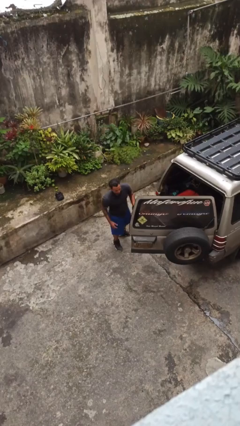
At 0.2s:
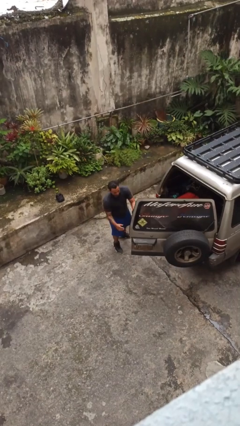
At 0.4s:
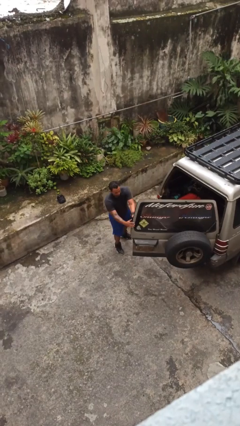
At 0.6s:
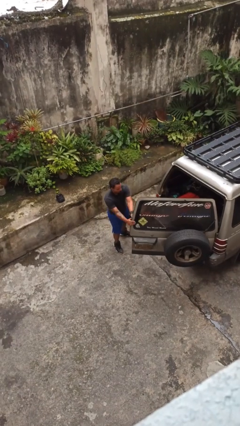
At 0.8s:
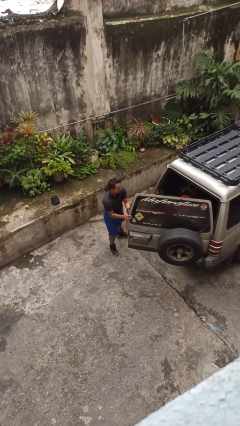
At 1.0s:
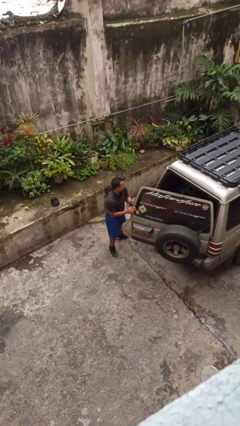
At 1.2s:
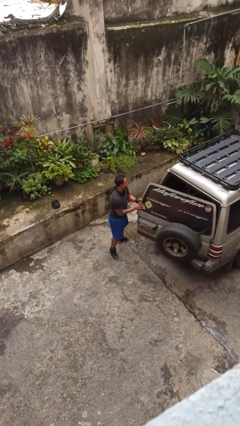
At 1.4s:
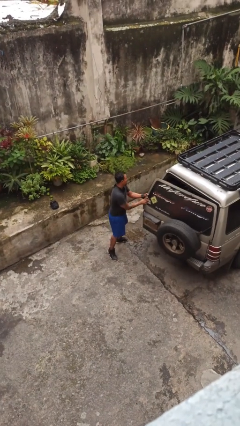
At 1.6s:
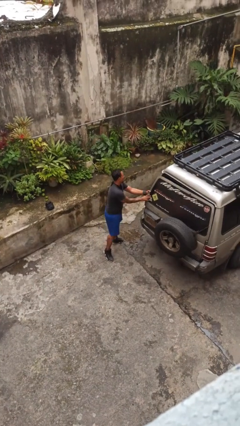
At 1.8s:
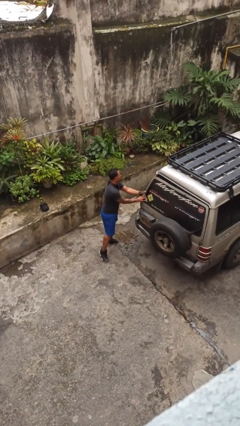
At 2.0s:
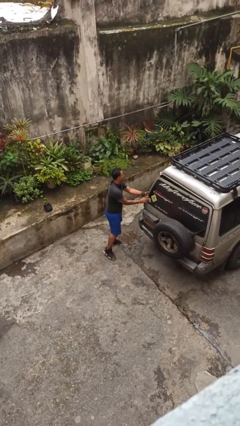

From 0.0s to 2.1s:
person closes car trunk

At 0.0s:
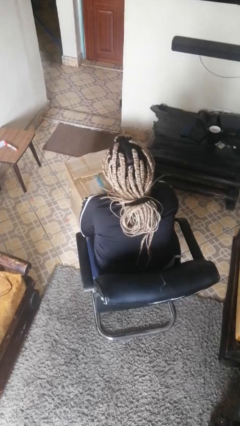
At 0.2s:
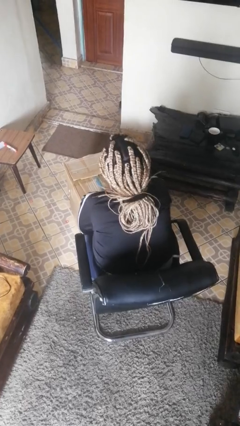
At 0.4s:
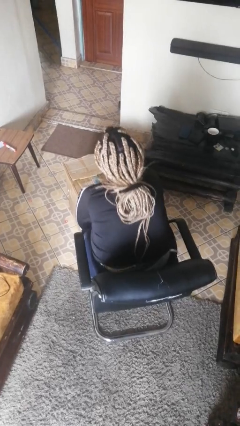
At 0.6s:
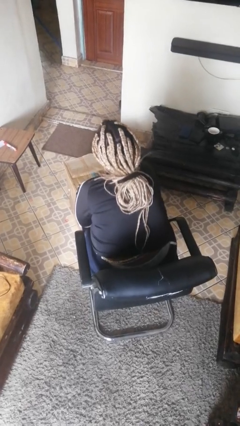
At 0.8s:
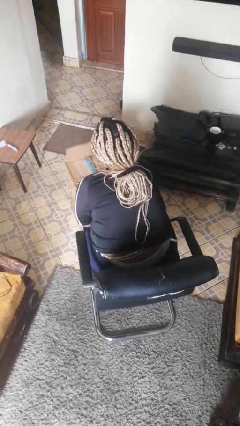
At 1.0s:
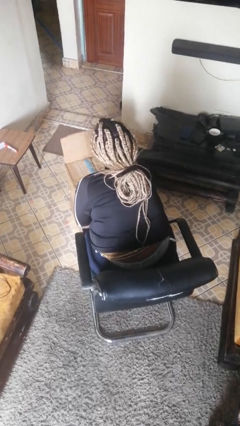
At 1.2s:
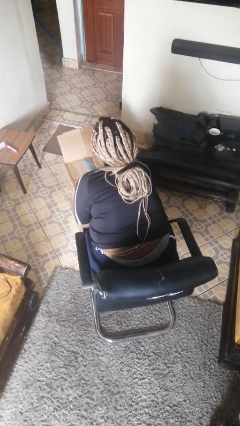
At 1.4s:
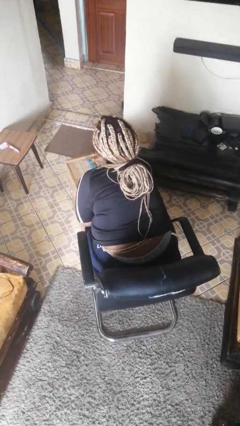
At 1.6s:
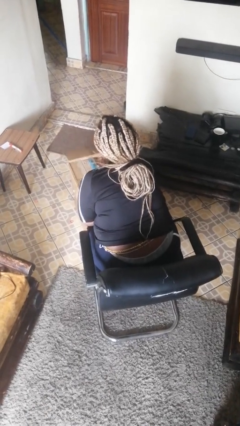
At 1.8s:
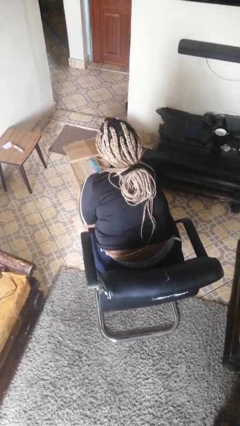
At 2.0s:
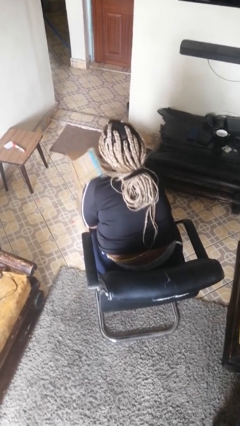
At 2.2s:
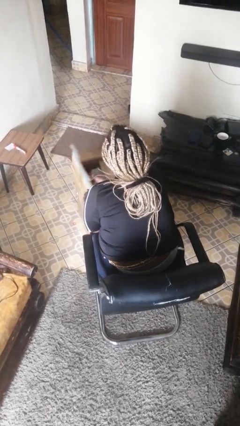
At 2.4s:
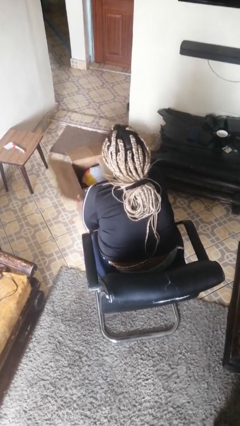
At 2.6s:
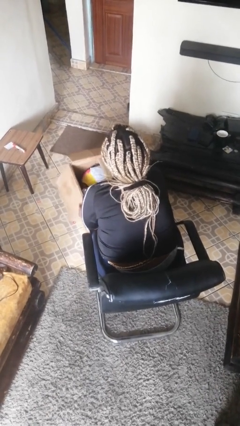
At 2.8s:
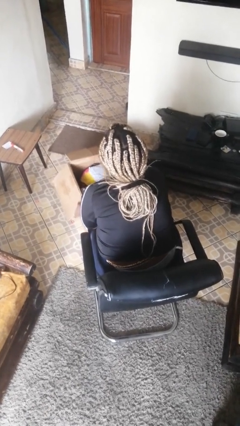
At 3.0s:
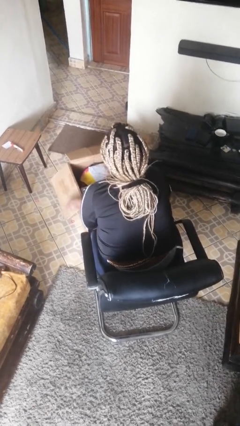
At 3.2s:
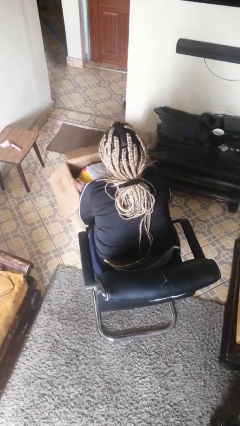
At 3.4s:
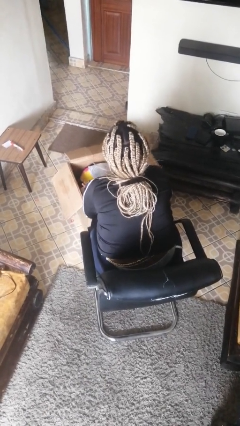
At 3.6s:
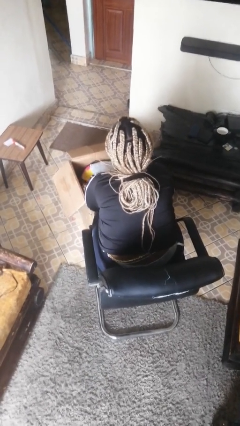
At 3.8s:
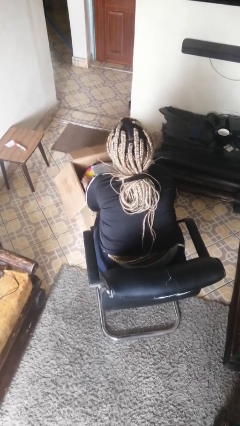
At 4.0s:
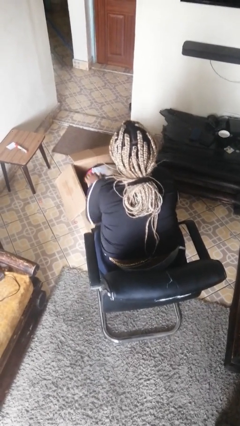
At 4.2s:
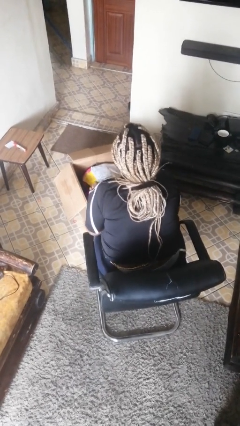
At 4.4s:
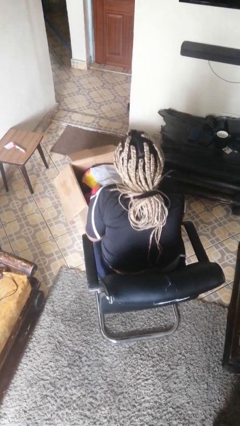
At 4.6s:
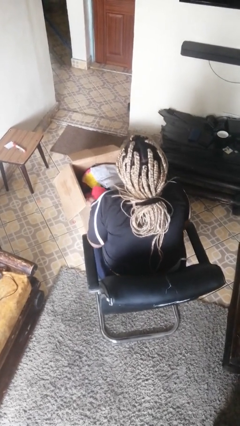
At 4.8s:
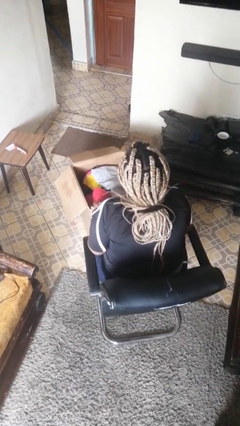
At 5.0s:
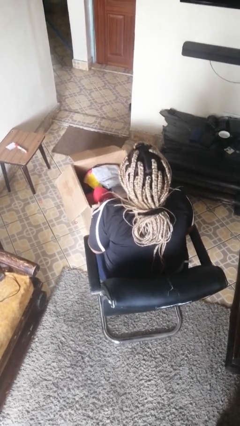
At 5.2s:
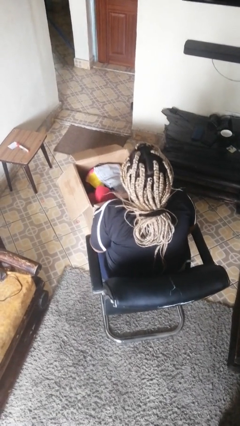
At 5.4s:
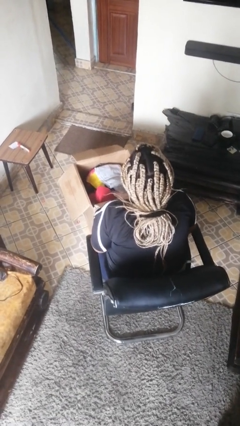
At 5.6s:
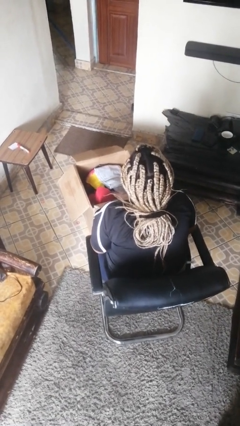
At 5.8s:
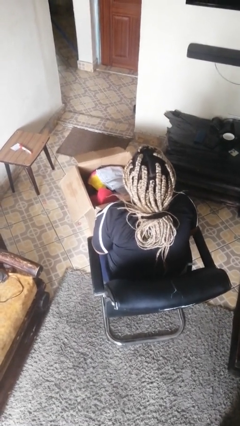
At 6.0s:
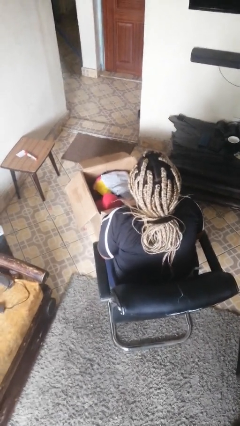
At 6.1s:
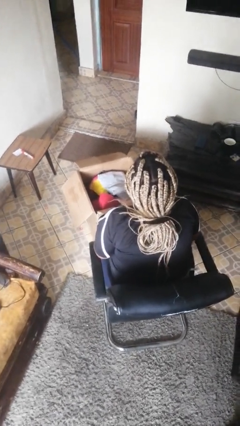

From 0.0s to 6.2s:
person opens box

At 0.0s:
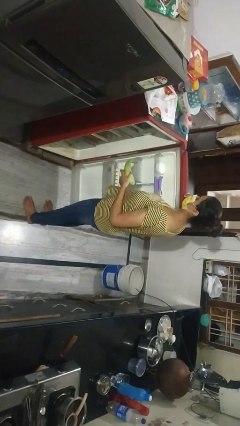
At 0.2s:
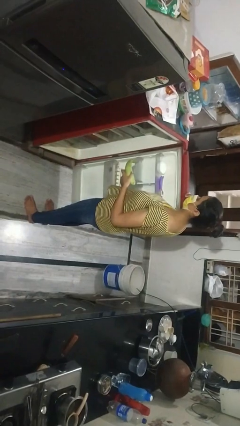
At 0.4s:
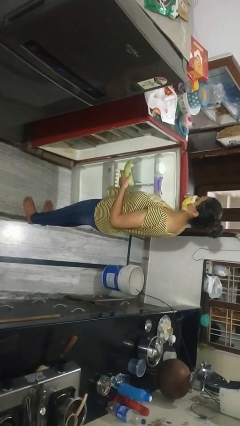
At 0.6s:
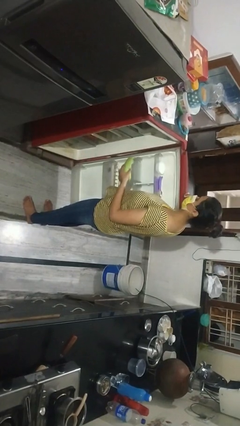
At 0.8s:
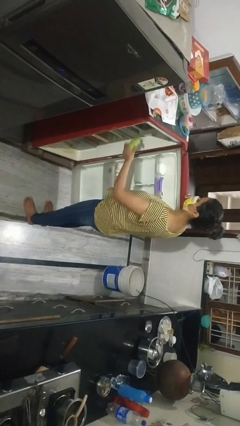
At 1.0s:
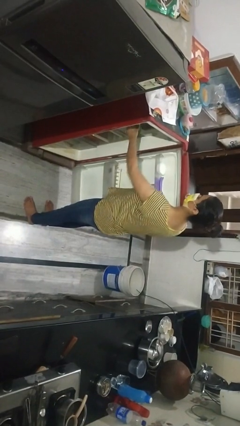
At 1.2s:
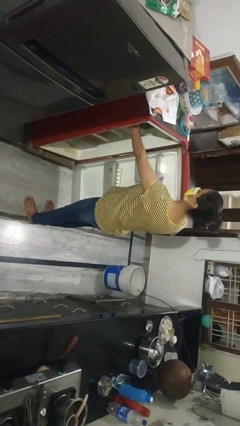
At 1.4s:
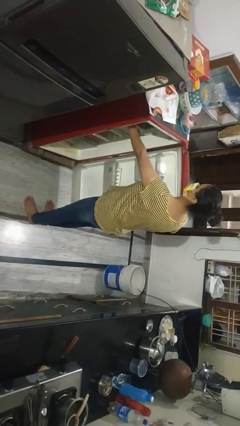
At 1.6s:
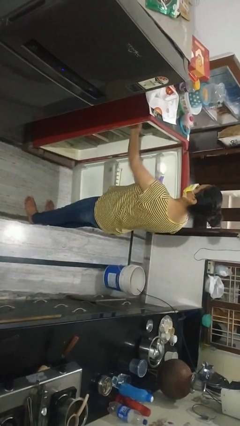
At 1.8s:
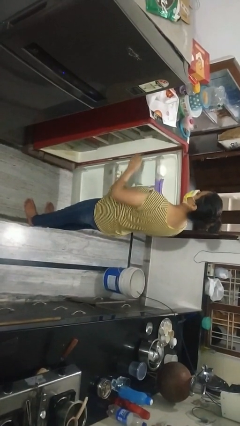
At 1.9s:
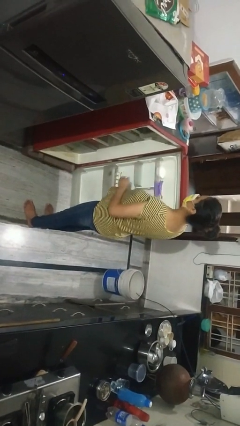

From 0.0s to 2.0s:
person puts object into refrigerator

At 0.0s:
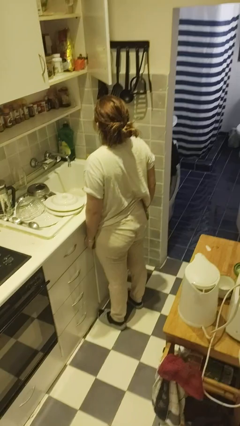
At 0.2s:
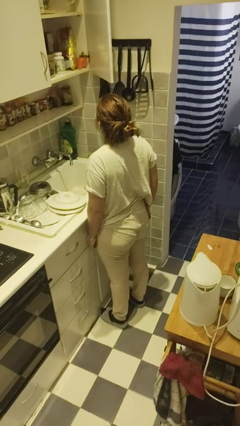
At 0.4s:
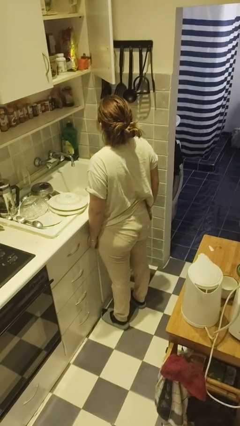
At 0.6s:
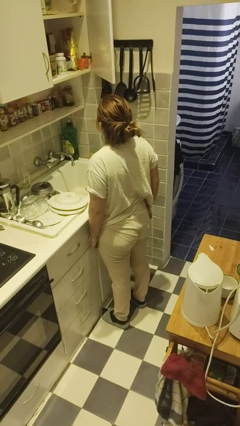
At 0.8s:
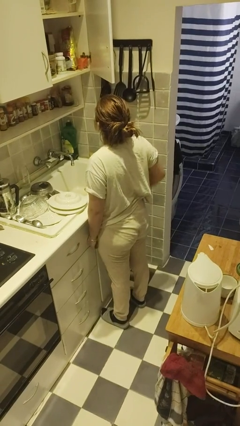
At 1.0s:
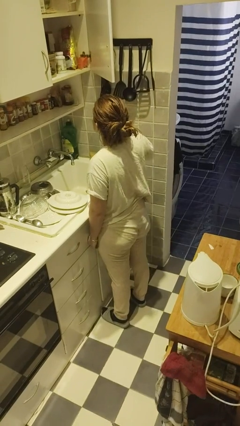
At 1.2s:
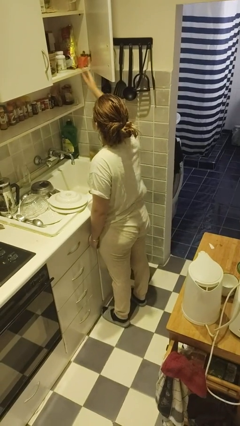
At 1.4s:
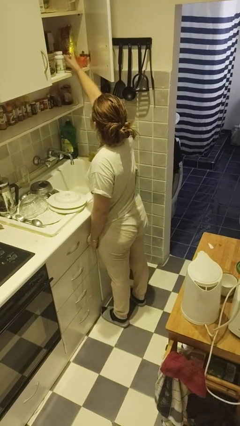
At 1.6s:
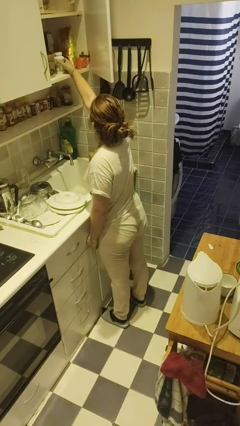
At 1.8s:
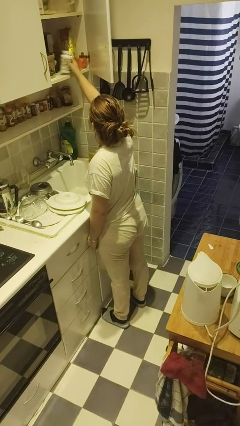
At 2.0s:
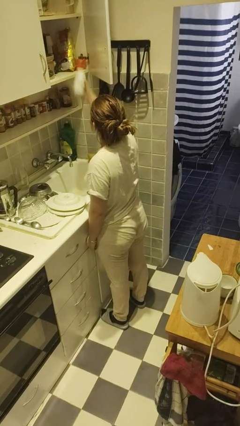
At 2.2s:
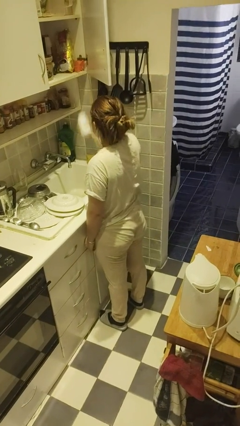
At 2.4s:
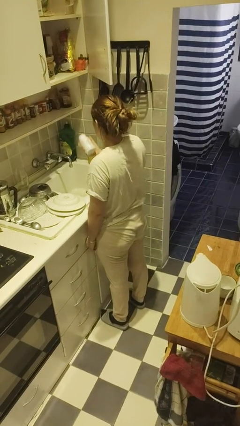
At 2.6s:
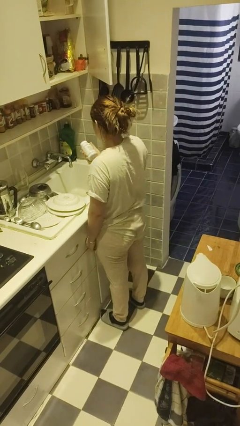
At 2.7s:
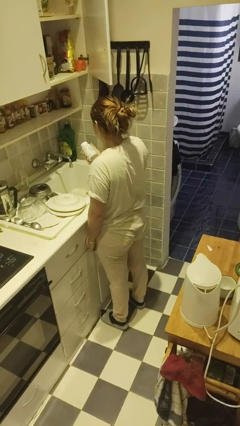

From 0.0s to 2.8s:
person picks up object from cabinet

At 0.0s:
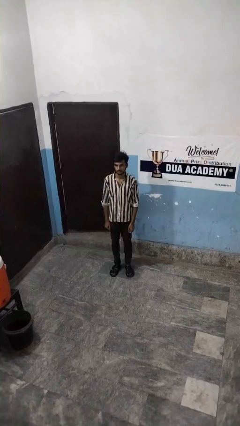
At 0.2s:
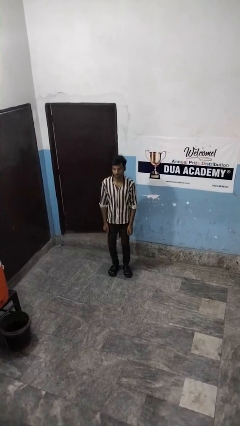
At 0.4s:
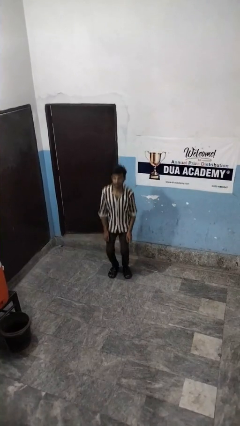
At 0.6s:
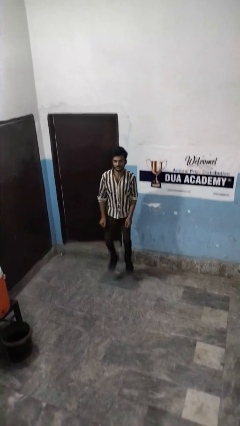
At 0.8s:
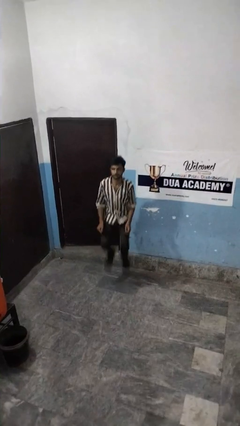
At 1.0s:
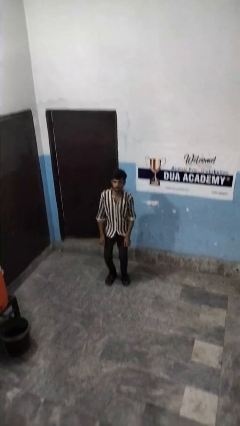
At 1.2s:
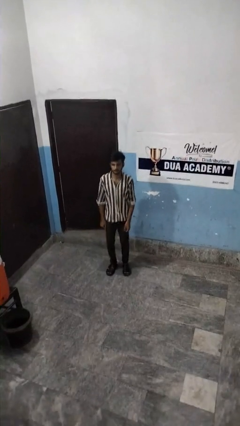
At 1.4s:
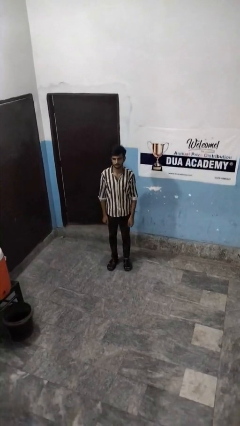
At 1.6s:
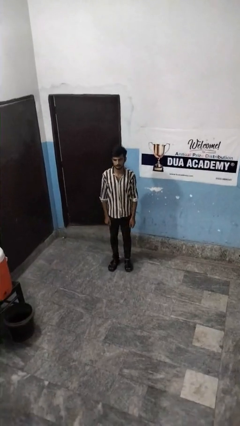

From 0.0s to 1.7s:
person jumps

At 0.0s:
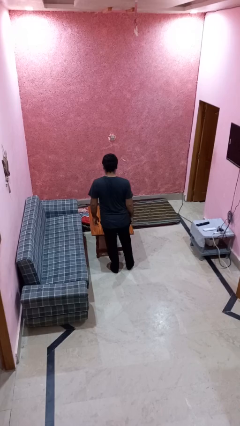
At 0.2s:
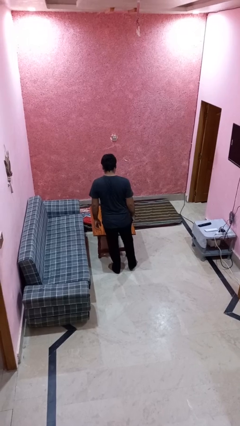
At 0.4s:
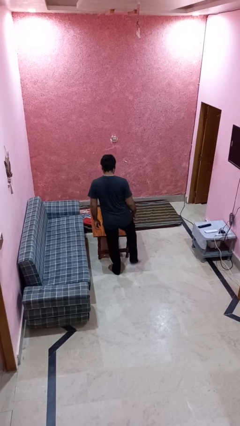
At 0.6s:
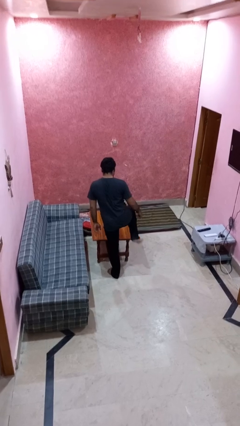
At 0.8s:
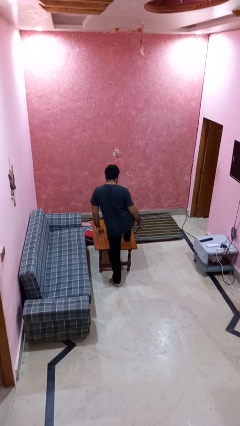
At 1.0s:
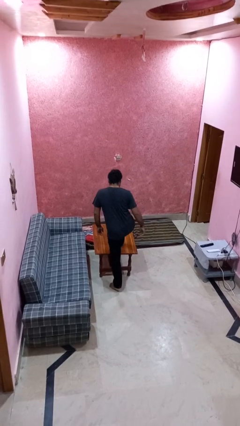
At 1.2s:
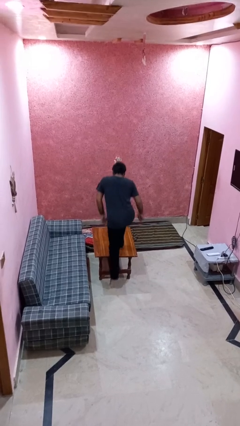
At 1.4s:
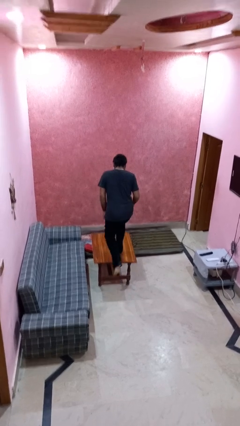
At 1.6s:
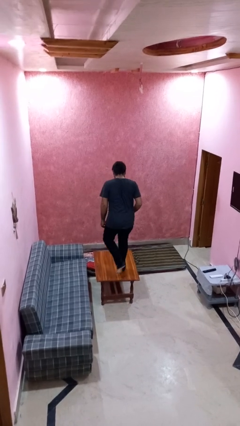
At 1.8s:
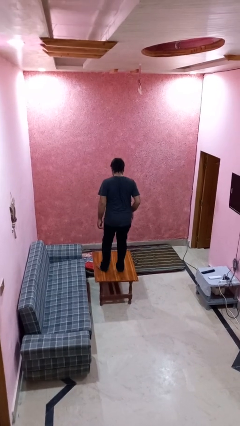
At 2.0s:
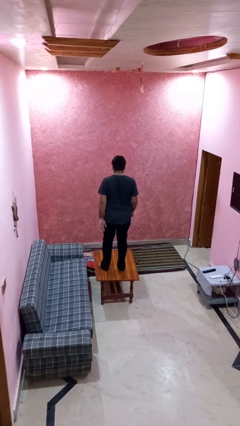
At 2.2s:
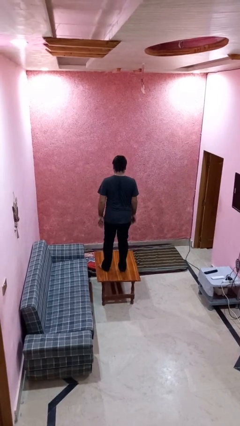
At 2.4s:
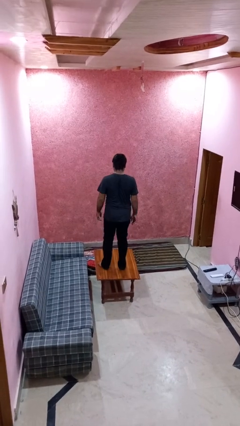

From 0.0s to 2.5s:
person climbs on table

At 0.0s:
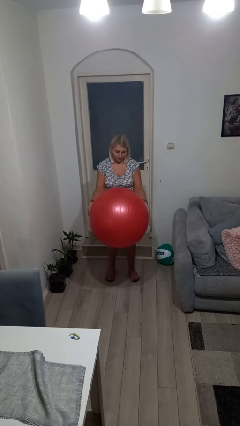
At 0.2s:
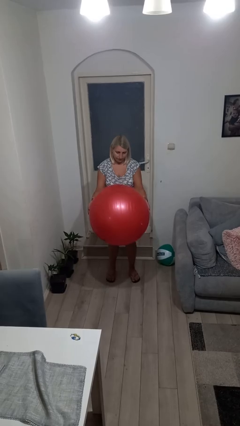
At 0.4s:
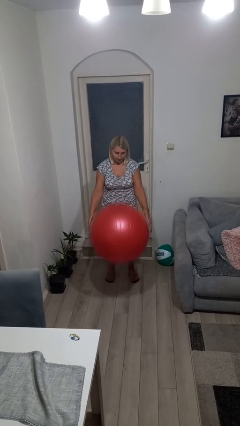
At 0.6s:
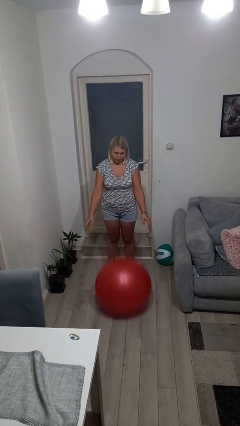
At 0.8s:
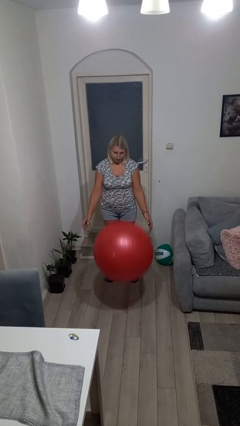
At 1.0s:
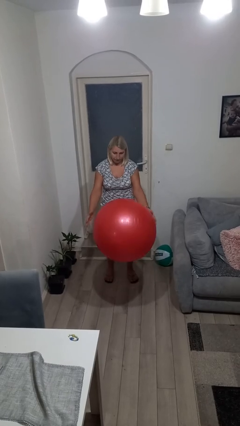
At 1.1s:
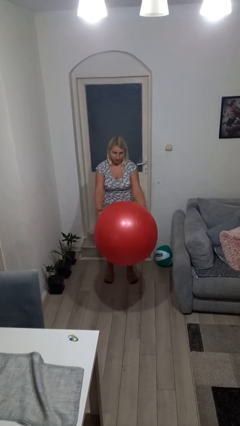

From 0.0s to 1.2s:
person bounces ball on floor
